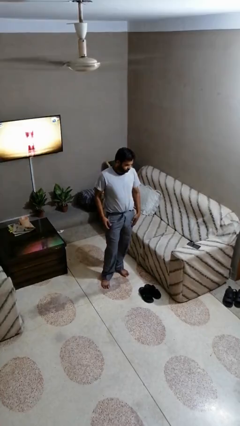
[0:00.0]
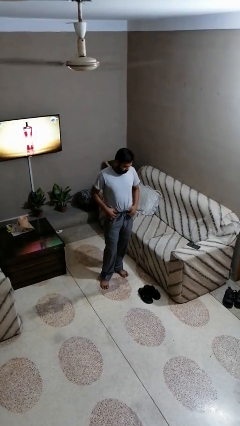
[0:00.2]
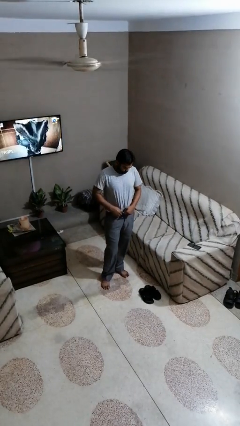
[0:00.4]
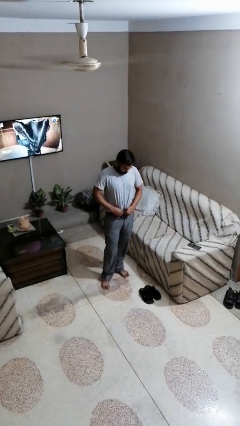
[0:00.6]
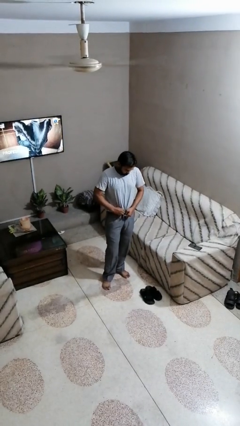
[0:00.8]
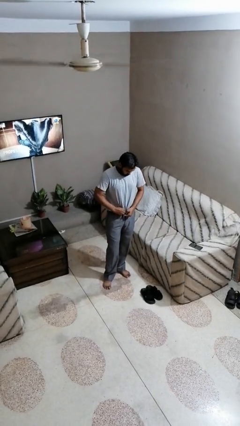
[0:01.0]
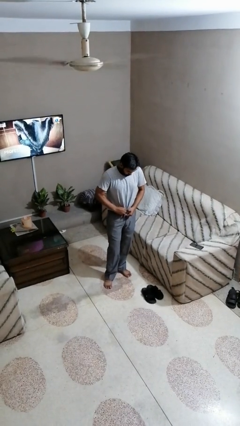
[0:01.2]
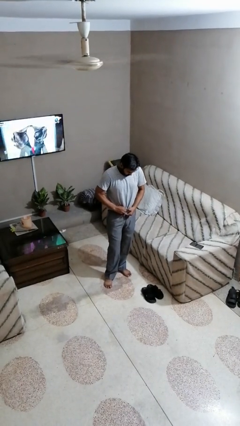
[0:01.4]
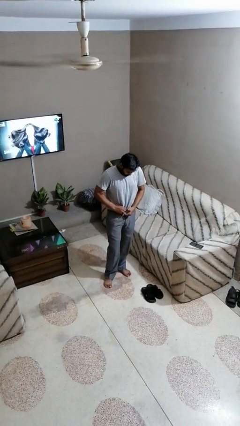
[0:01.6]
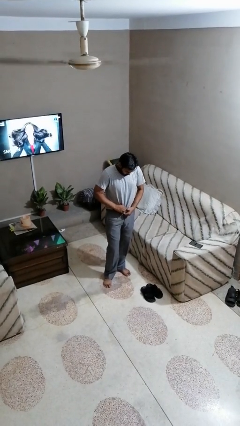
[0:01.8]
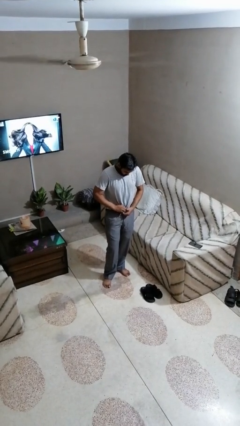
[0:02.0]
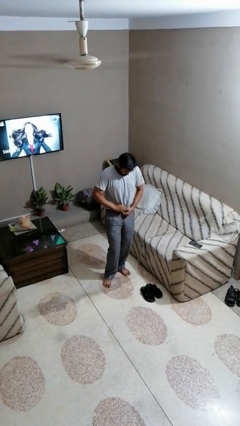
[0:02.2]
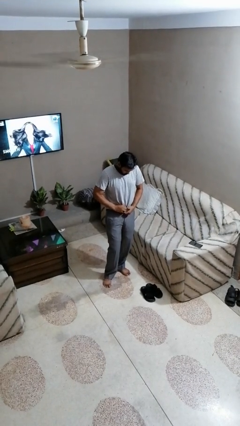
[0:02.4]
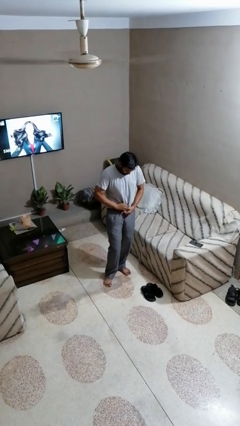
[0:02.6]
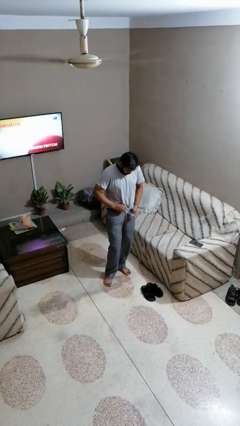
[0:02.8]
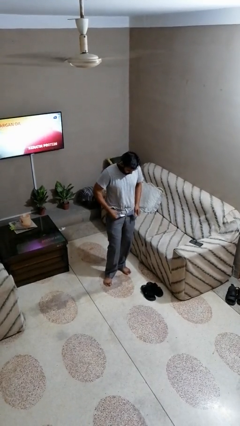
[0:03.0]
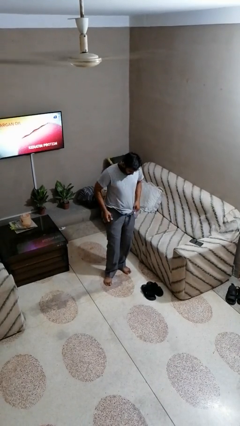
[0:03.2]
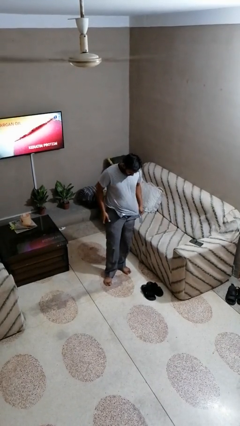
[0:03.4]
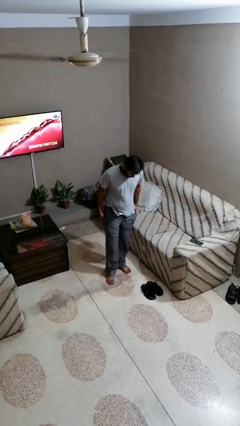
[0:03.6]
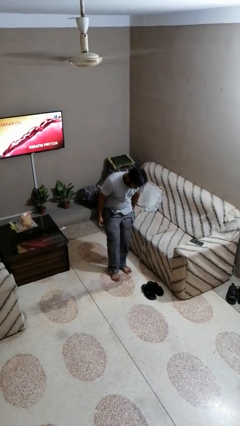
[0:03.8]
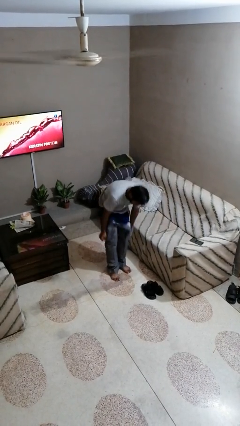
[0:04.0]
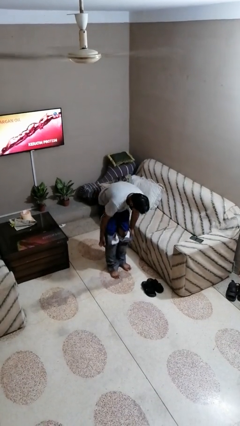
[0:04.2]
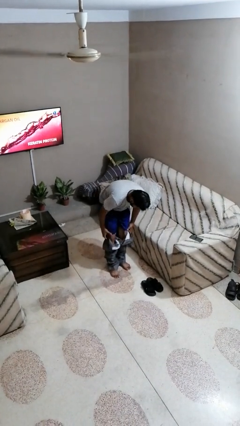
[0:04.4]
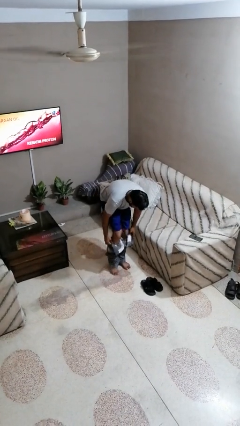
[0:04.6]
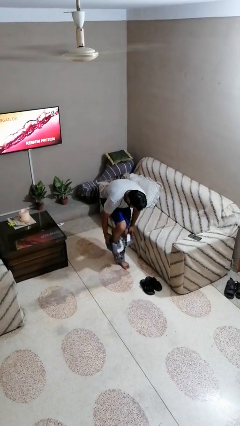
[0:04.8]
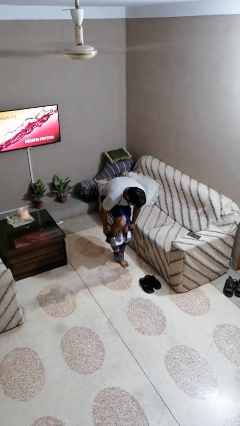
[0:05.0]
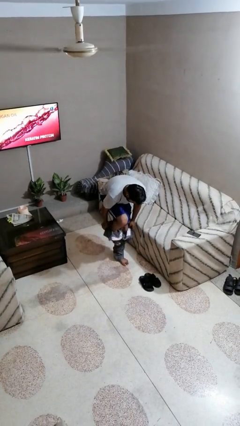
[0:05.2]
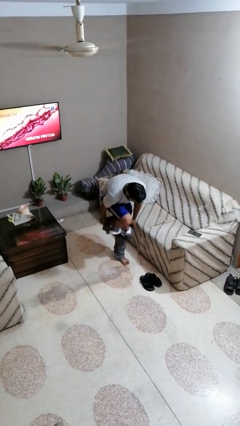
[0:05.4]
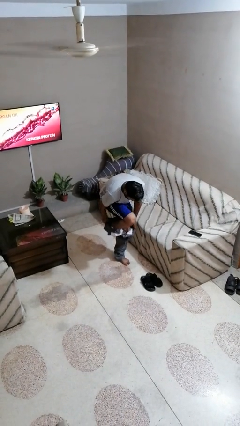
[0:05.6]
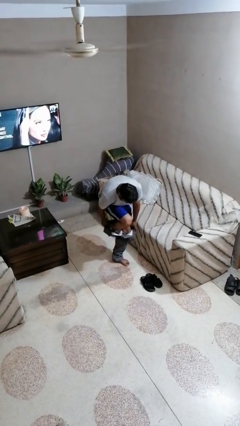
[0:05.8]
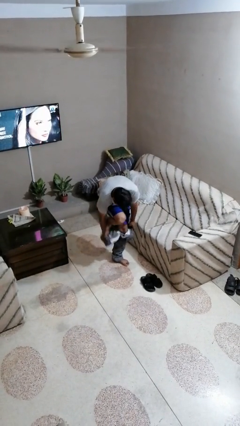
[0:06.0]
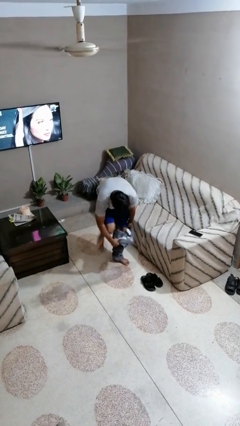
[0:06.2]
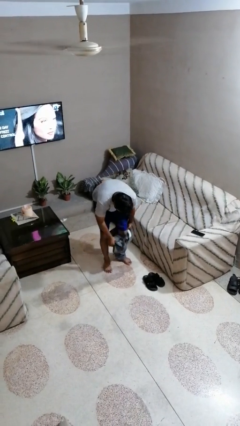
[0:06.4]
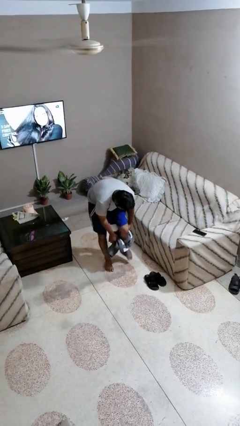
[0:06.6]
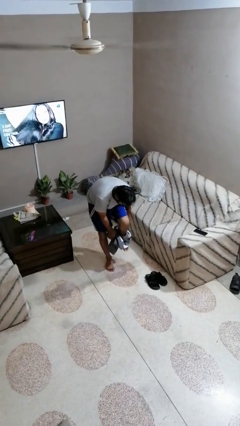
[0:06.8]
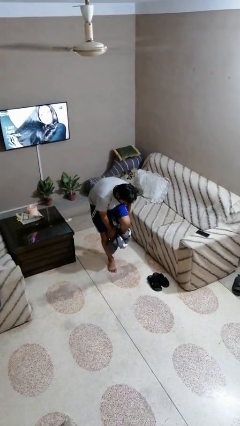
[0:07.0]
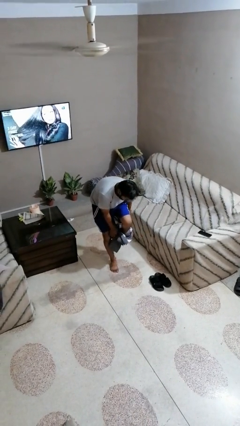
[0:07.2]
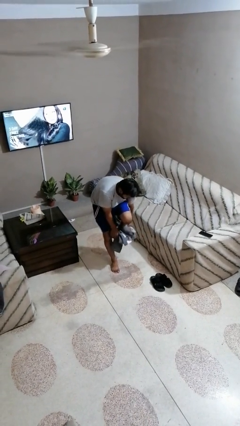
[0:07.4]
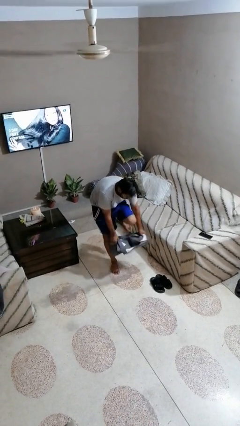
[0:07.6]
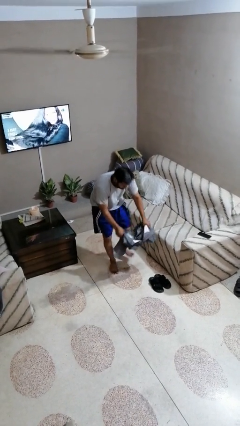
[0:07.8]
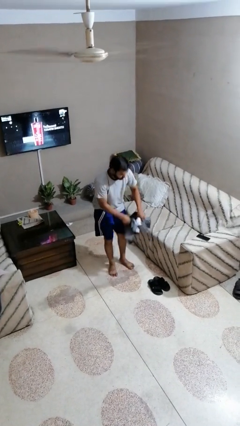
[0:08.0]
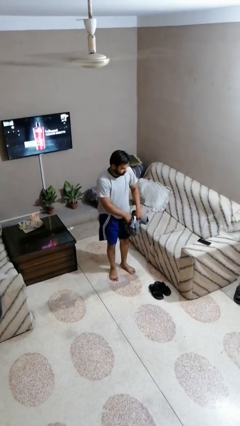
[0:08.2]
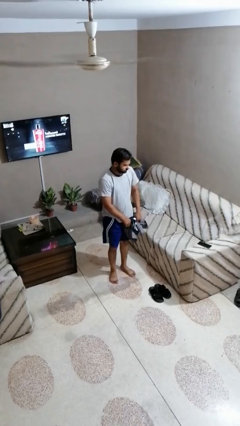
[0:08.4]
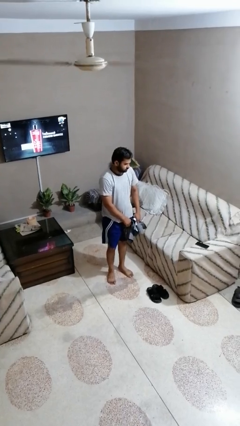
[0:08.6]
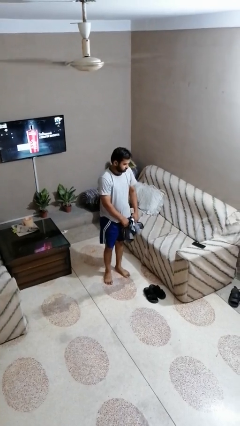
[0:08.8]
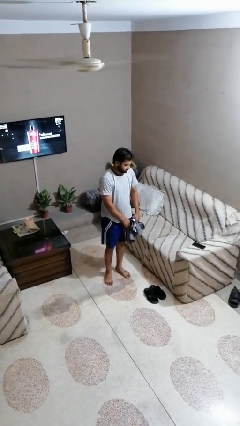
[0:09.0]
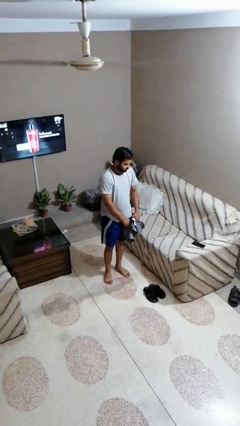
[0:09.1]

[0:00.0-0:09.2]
person takes off pants

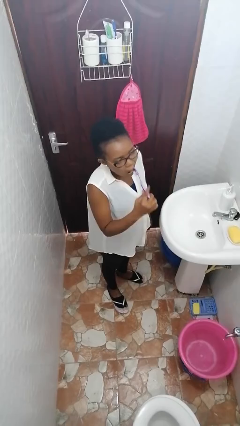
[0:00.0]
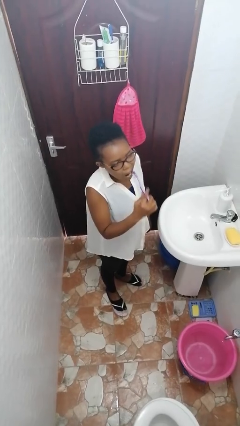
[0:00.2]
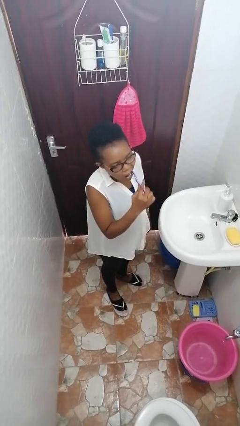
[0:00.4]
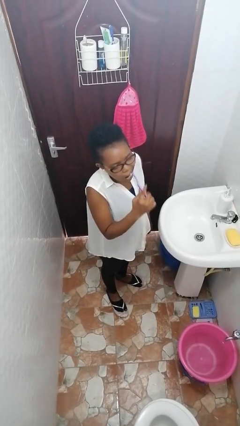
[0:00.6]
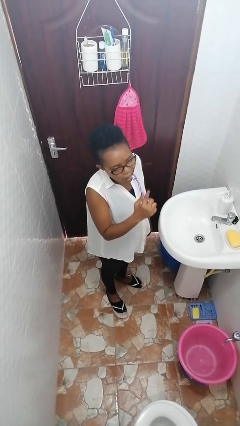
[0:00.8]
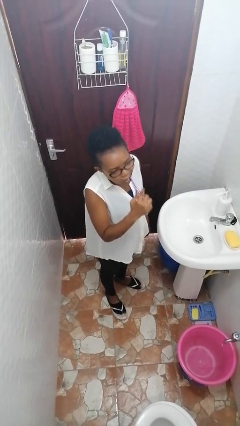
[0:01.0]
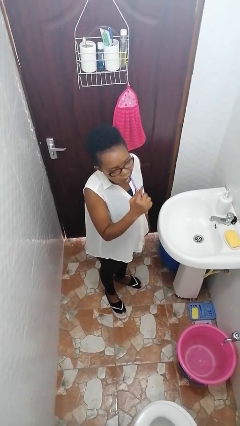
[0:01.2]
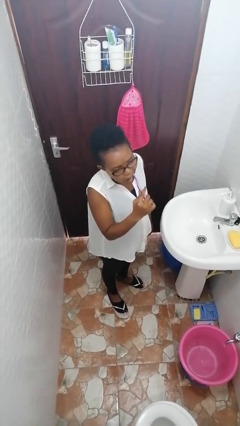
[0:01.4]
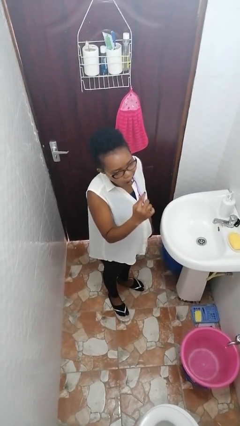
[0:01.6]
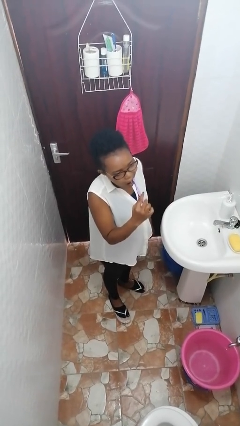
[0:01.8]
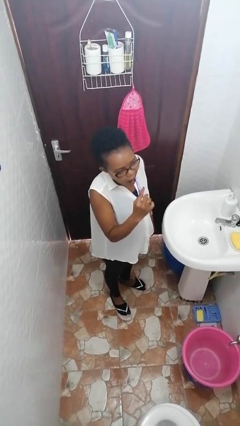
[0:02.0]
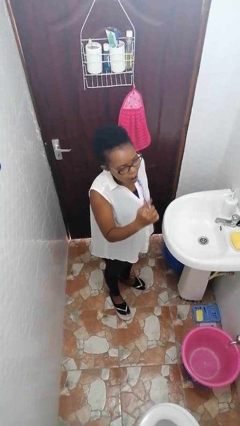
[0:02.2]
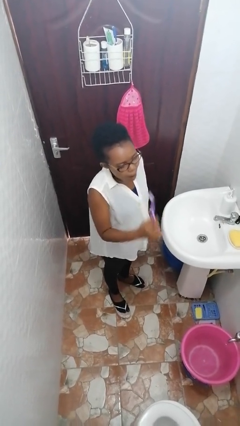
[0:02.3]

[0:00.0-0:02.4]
person brushes teeth

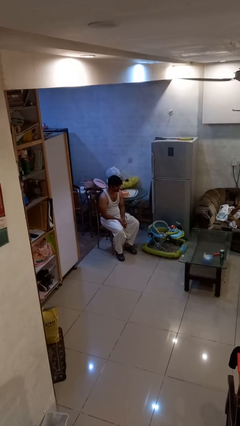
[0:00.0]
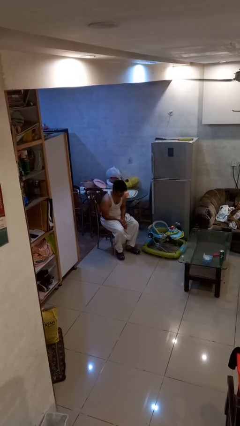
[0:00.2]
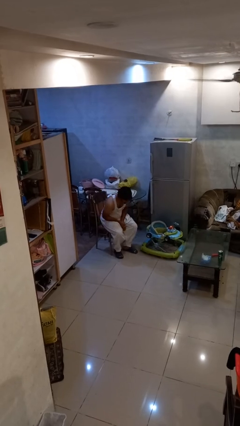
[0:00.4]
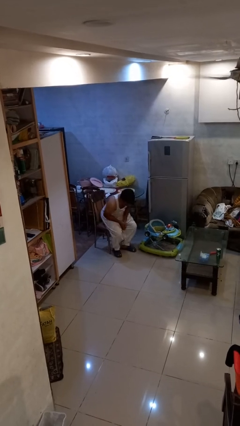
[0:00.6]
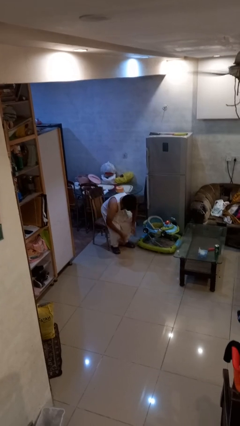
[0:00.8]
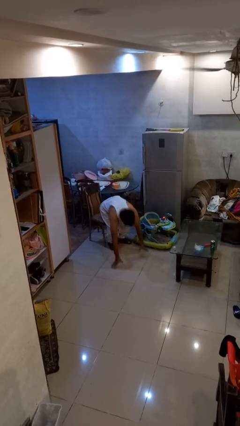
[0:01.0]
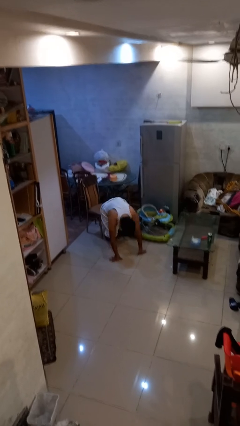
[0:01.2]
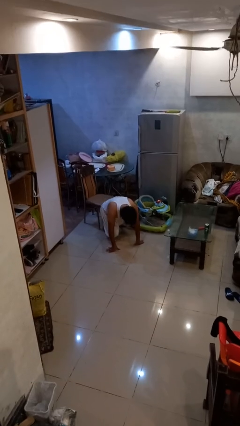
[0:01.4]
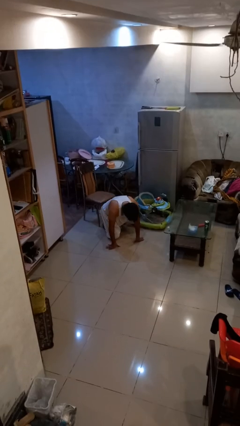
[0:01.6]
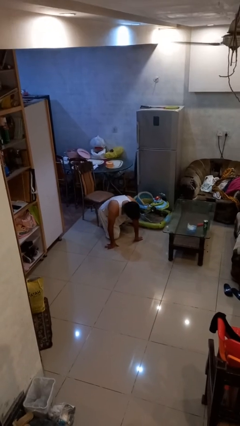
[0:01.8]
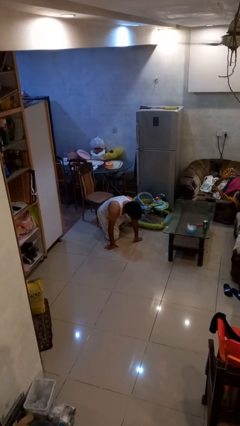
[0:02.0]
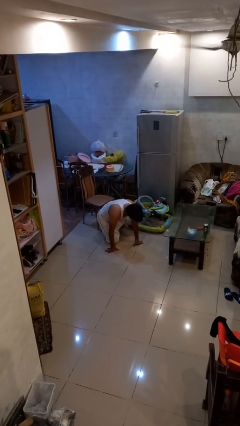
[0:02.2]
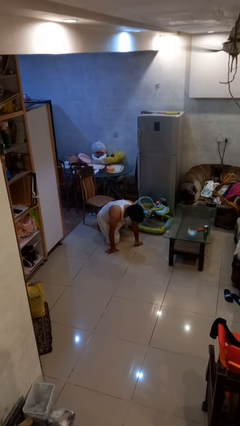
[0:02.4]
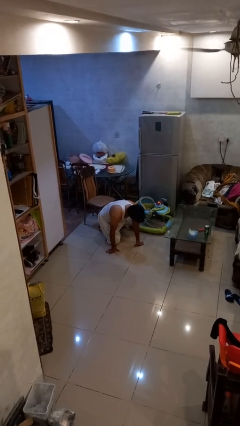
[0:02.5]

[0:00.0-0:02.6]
person falls from chair

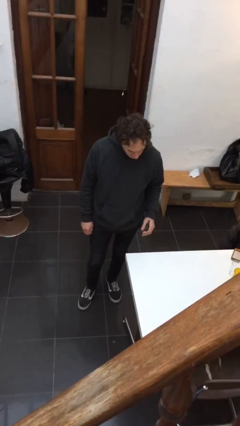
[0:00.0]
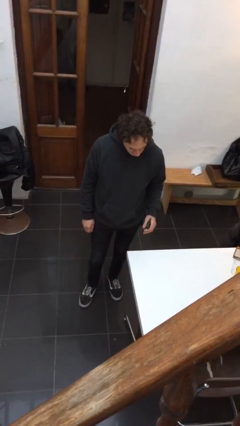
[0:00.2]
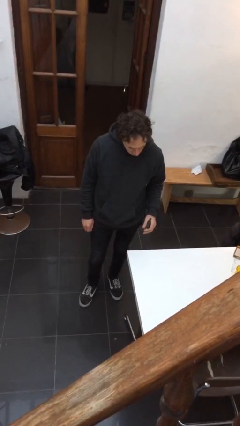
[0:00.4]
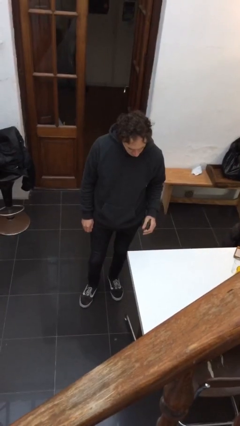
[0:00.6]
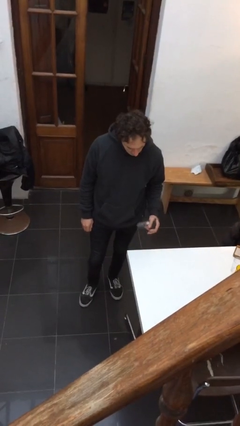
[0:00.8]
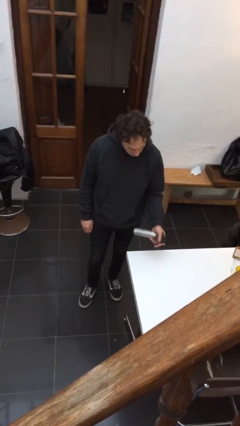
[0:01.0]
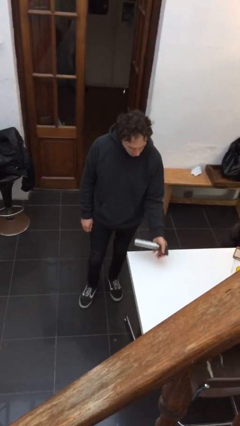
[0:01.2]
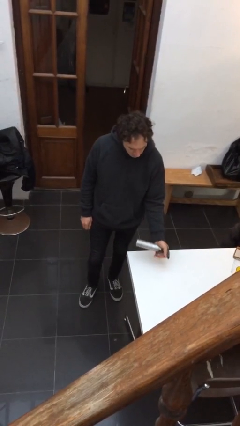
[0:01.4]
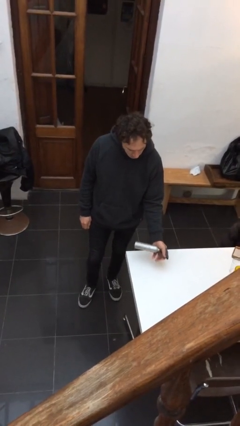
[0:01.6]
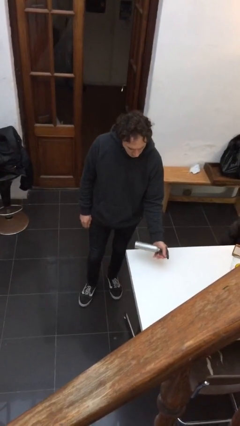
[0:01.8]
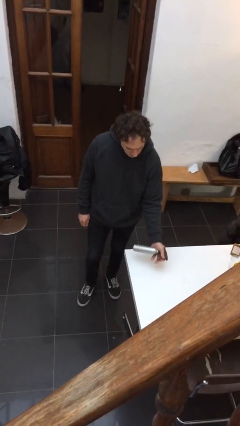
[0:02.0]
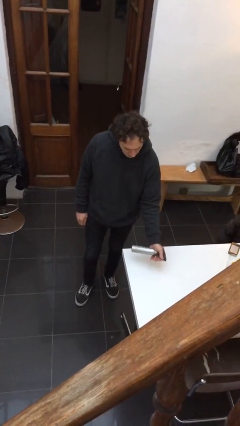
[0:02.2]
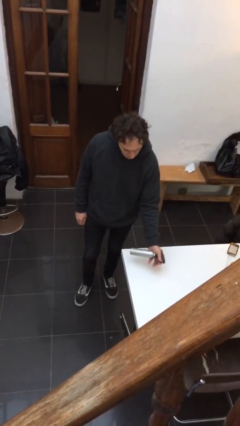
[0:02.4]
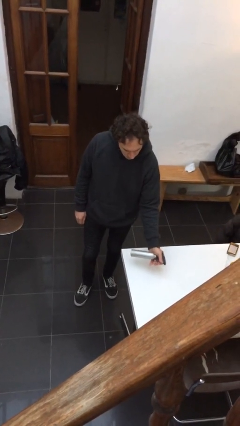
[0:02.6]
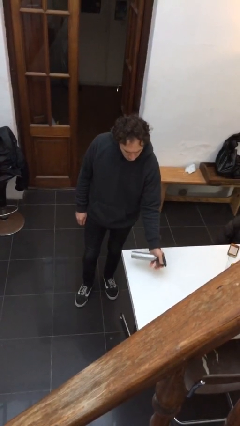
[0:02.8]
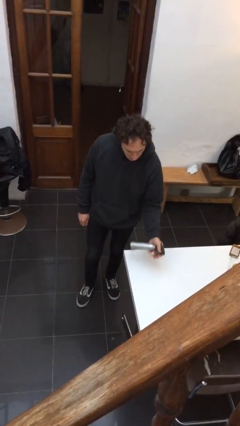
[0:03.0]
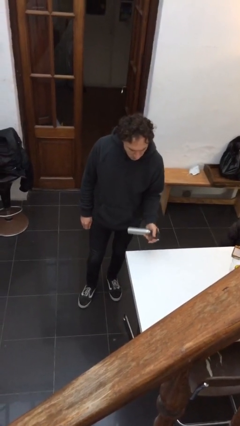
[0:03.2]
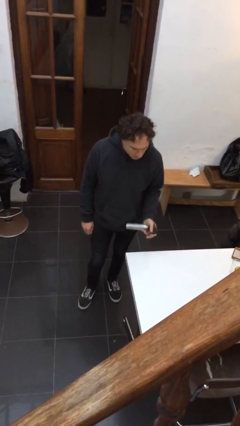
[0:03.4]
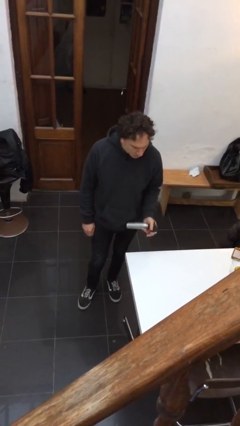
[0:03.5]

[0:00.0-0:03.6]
person sprays from bottle
